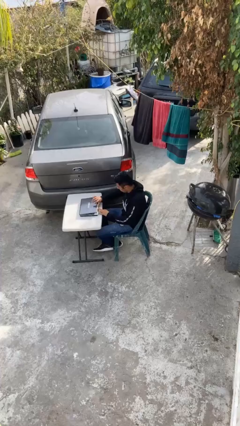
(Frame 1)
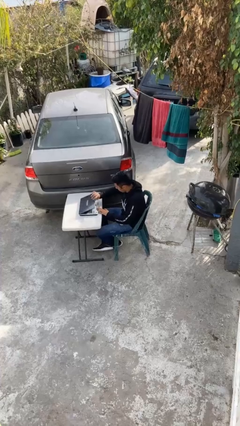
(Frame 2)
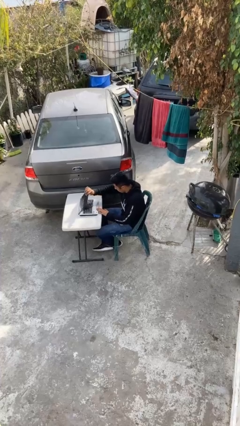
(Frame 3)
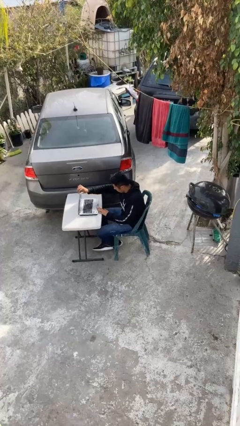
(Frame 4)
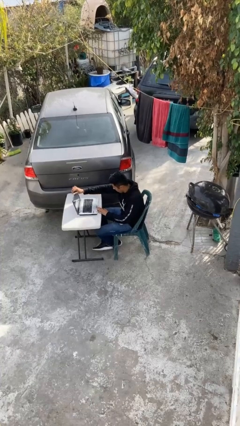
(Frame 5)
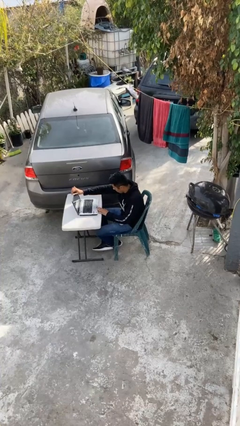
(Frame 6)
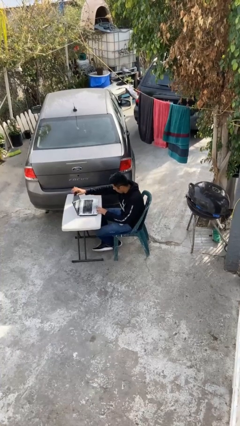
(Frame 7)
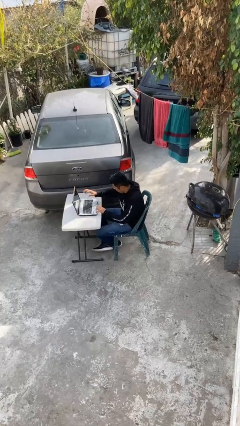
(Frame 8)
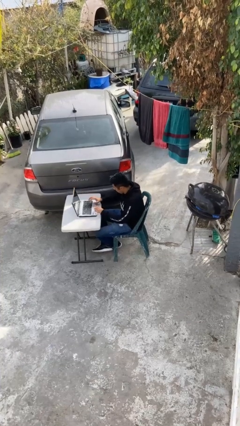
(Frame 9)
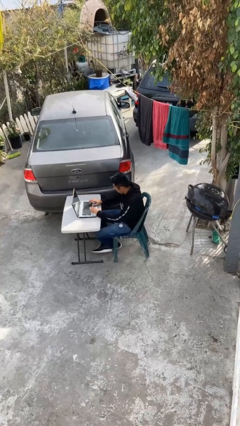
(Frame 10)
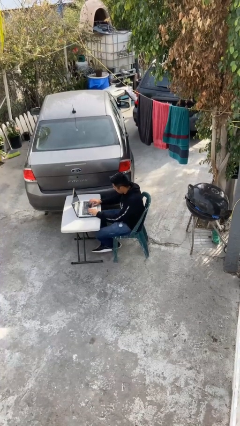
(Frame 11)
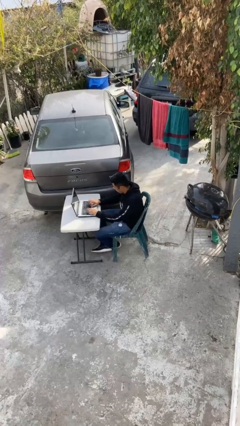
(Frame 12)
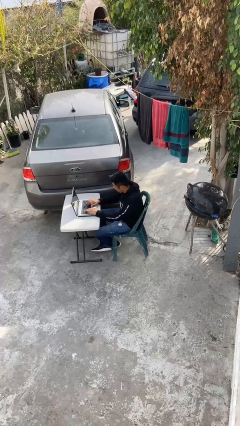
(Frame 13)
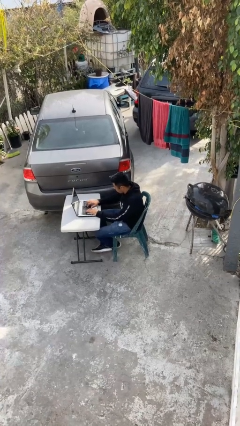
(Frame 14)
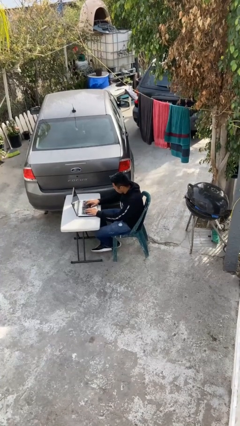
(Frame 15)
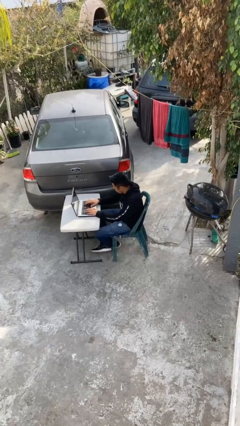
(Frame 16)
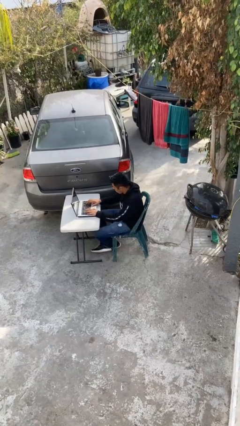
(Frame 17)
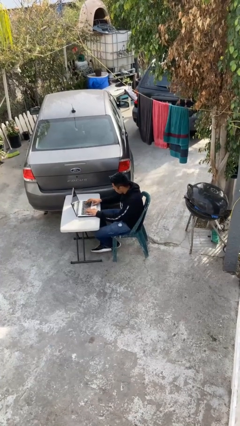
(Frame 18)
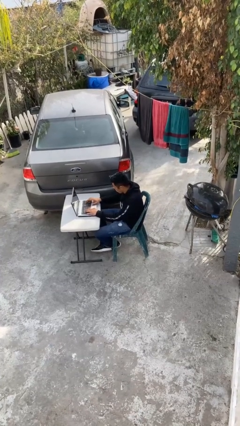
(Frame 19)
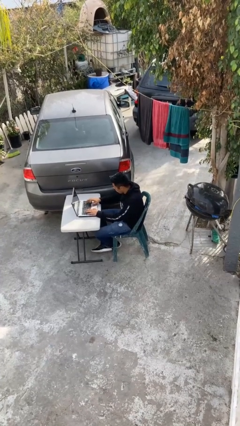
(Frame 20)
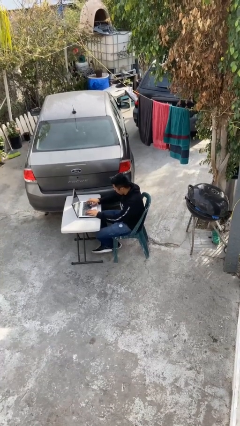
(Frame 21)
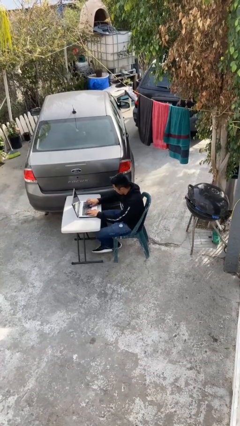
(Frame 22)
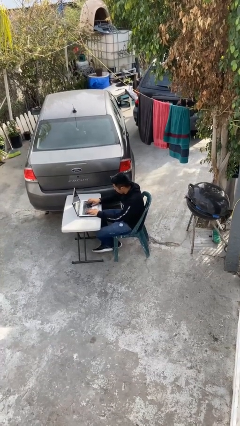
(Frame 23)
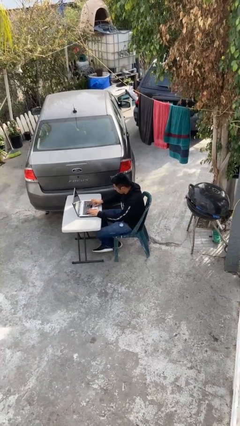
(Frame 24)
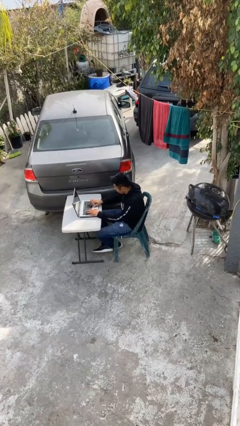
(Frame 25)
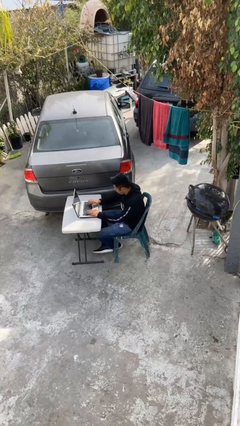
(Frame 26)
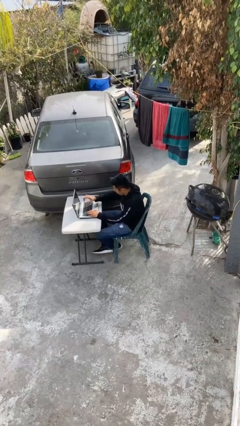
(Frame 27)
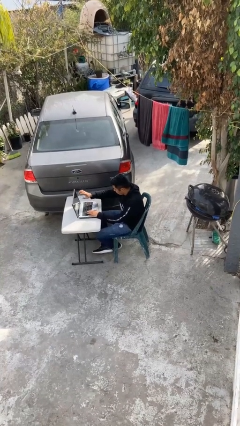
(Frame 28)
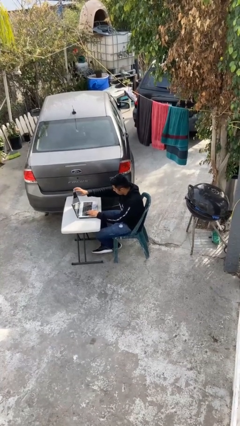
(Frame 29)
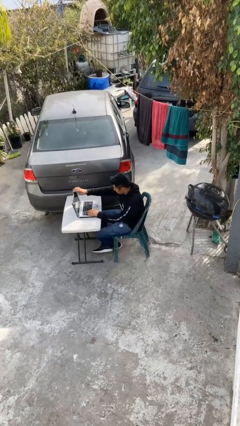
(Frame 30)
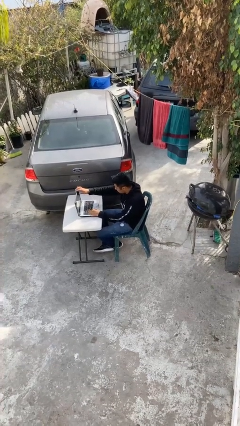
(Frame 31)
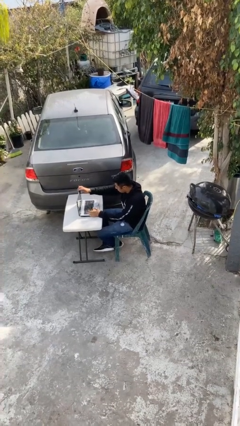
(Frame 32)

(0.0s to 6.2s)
person interacts with laptop

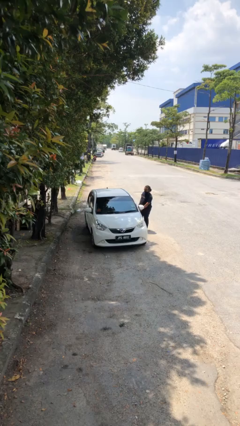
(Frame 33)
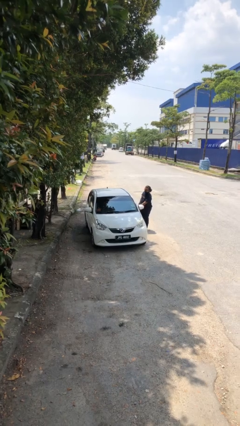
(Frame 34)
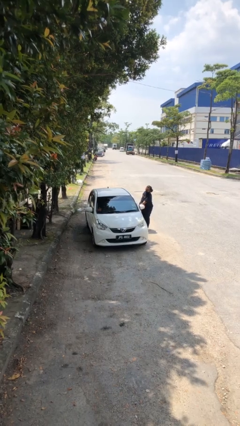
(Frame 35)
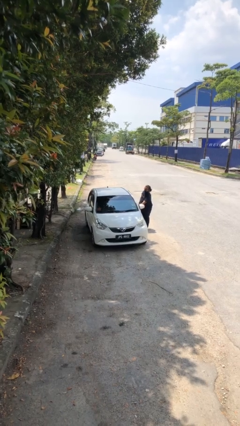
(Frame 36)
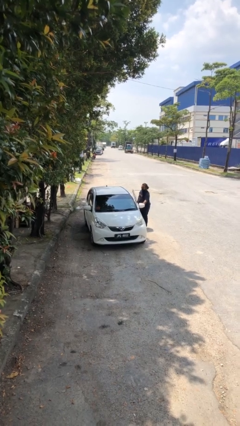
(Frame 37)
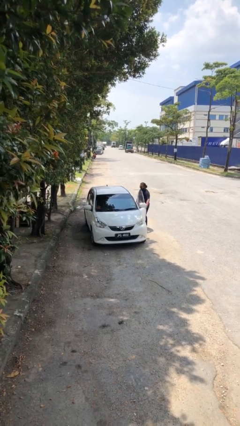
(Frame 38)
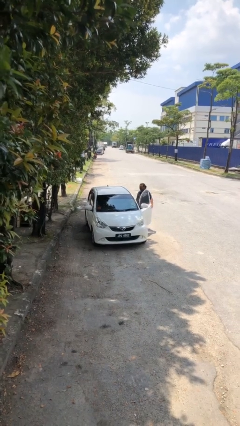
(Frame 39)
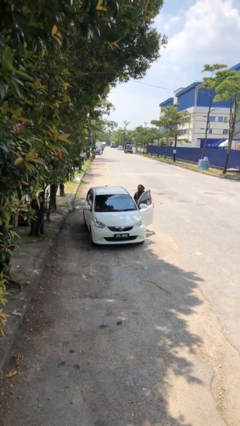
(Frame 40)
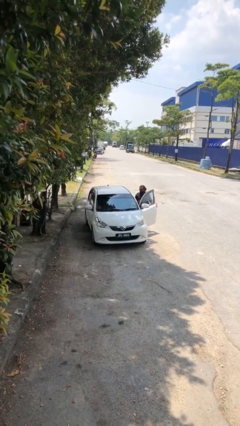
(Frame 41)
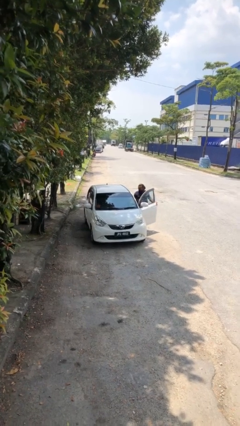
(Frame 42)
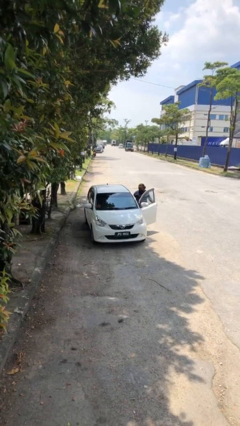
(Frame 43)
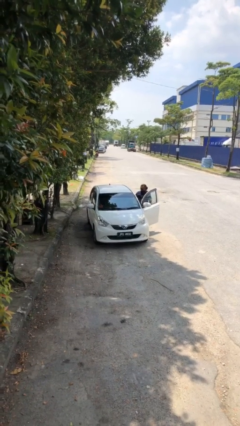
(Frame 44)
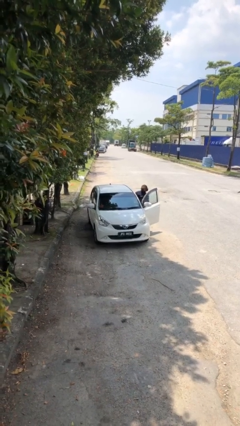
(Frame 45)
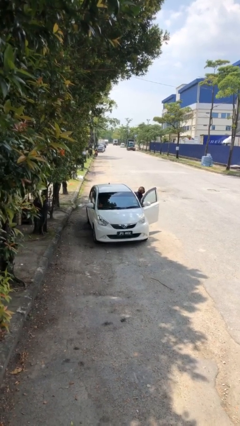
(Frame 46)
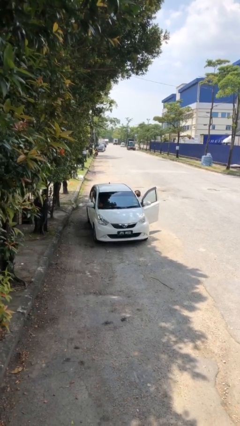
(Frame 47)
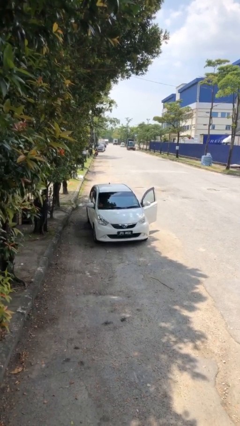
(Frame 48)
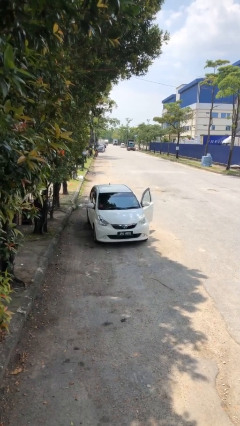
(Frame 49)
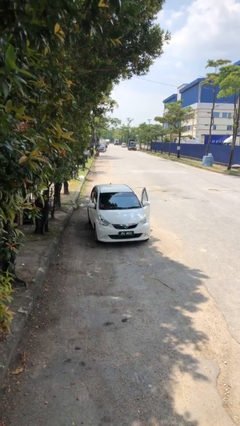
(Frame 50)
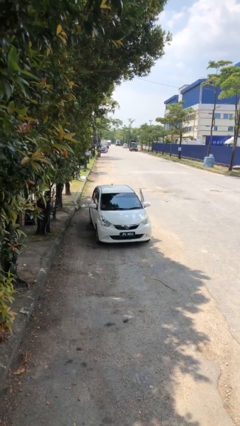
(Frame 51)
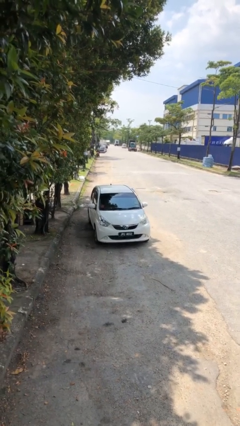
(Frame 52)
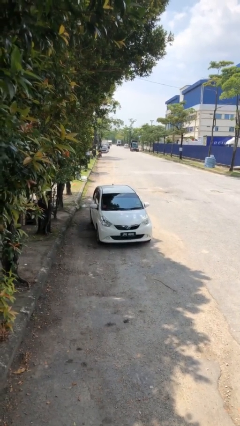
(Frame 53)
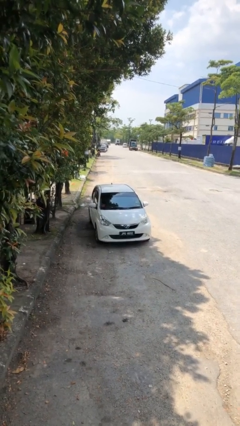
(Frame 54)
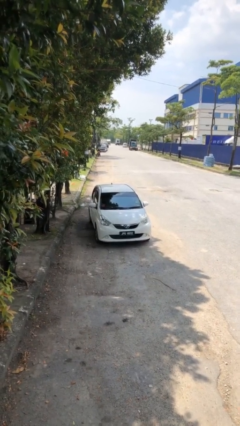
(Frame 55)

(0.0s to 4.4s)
car picks up person

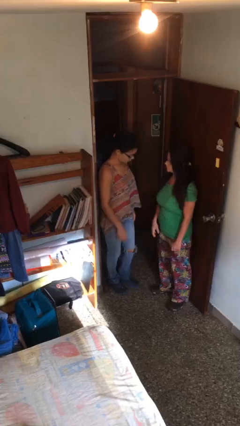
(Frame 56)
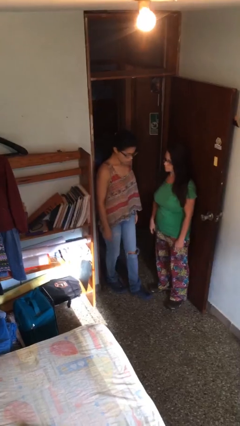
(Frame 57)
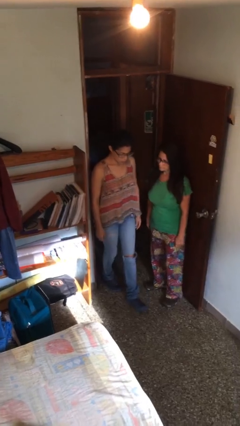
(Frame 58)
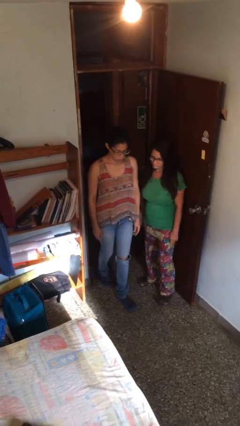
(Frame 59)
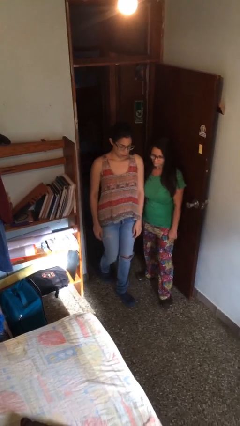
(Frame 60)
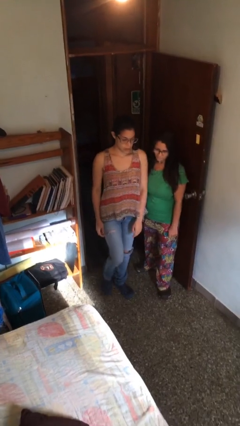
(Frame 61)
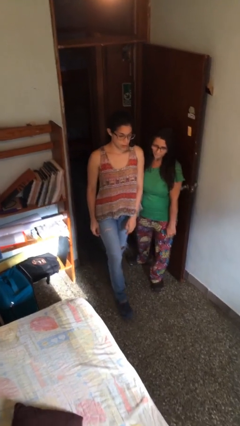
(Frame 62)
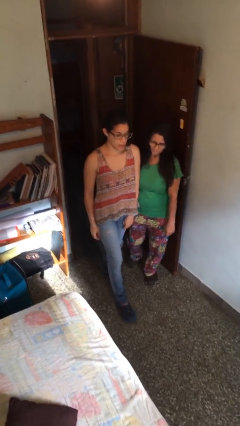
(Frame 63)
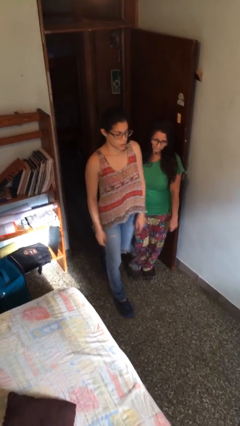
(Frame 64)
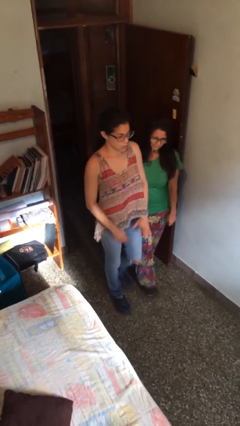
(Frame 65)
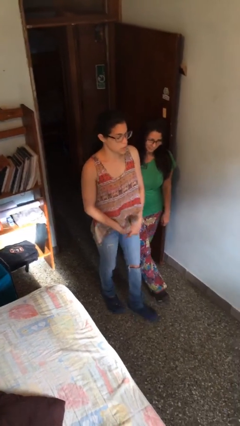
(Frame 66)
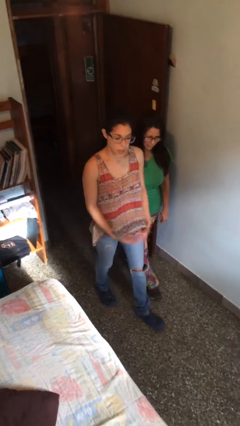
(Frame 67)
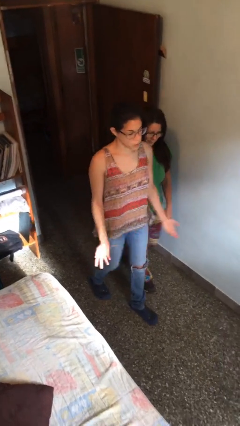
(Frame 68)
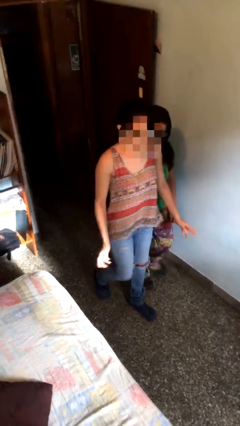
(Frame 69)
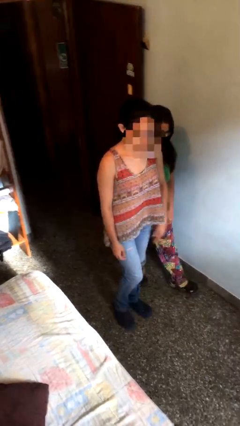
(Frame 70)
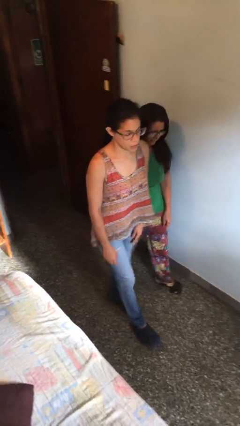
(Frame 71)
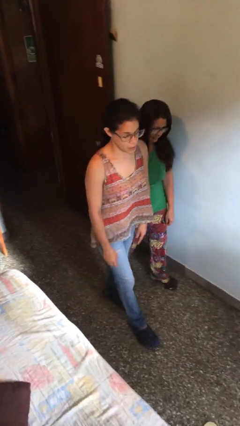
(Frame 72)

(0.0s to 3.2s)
person talks to person

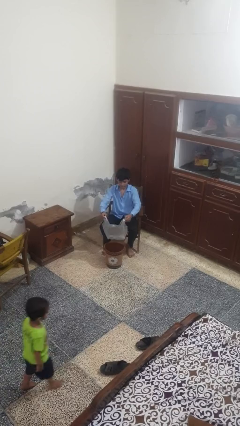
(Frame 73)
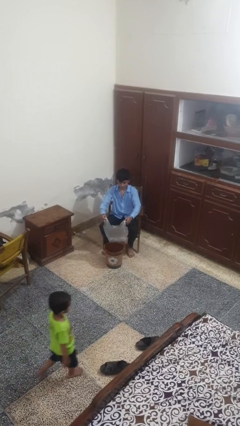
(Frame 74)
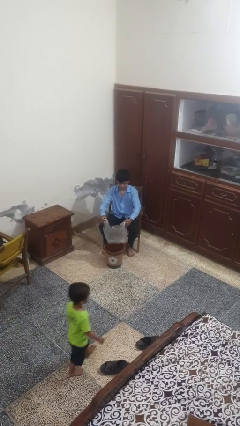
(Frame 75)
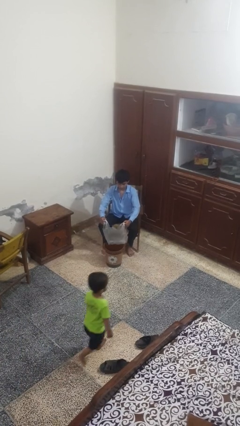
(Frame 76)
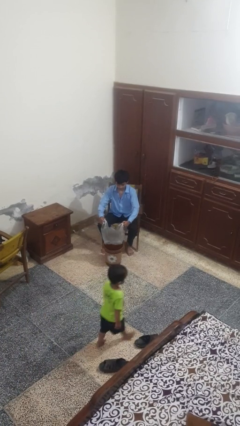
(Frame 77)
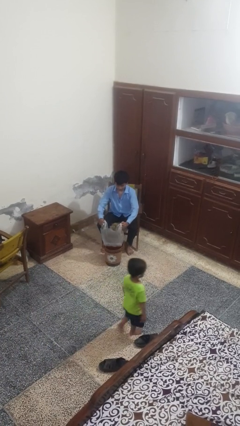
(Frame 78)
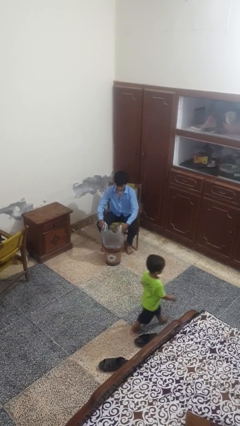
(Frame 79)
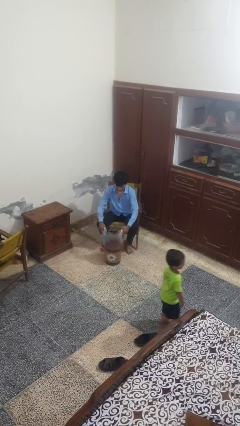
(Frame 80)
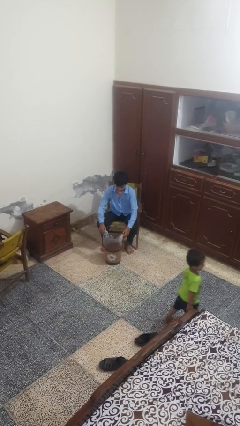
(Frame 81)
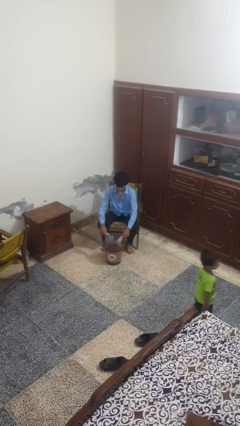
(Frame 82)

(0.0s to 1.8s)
person inserts trashbag into trashcan

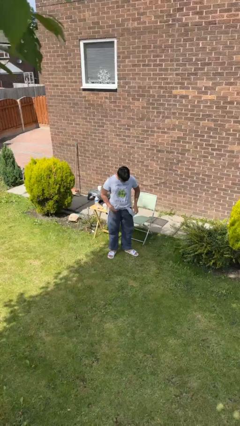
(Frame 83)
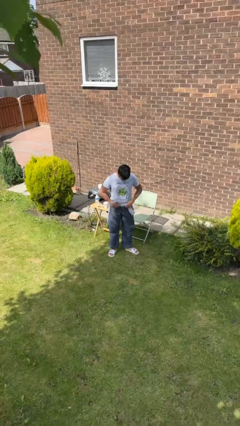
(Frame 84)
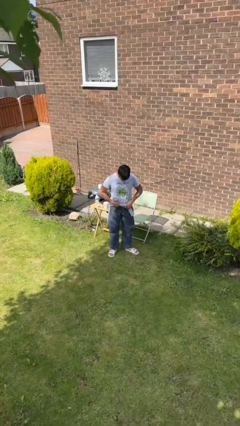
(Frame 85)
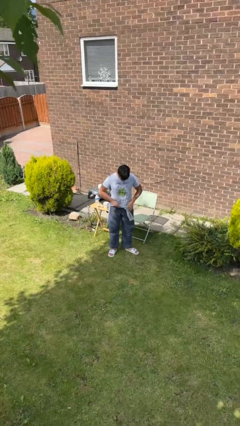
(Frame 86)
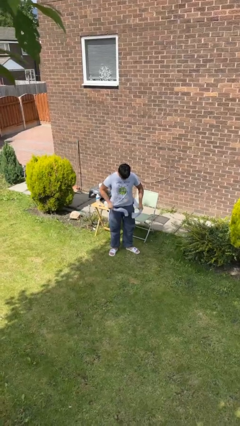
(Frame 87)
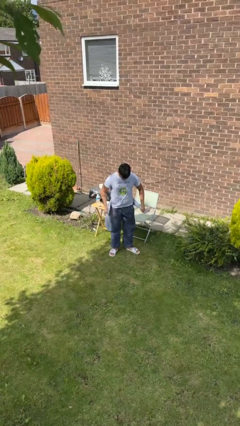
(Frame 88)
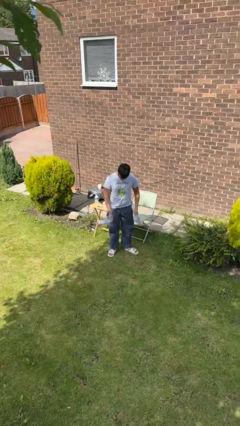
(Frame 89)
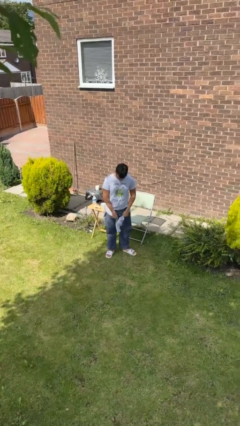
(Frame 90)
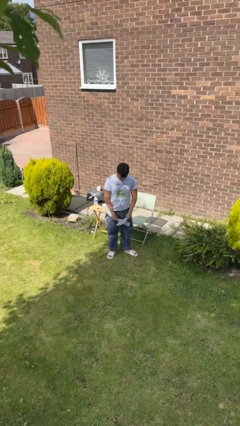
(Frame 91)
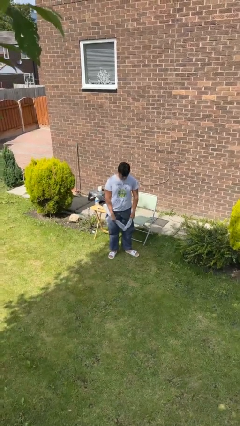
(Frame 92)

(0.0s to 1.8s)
person unties jacket around waist

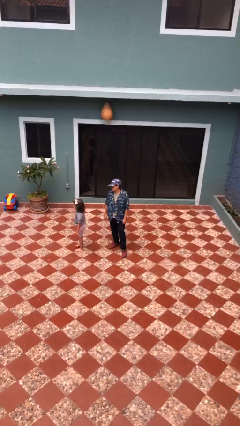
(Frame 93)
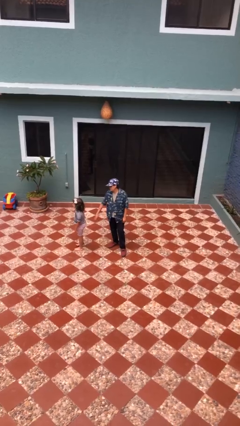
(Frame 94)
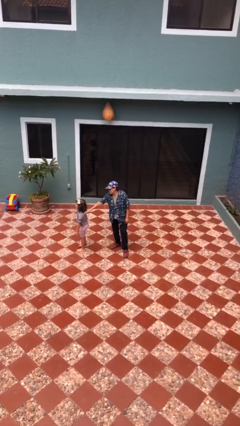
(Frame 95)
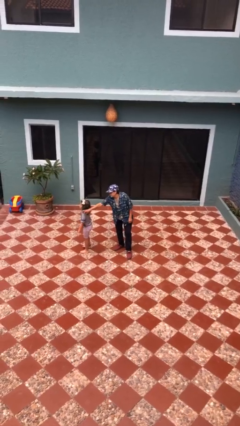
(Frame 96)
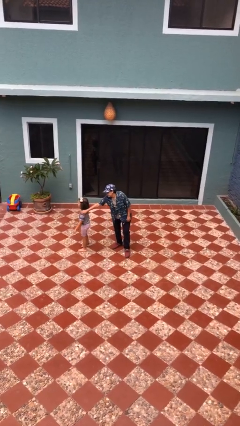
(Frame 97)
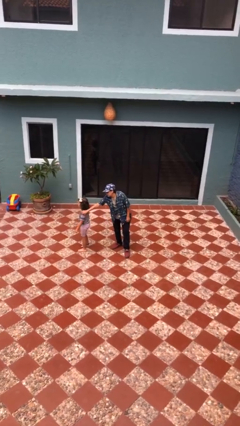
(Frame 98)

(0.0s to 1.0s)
person grabs person by shoulder
